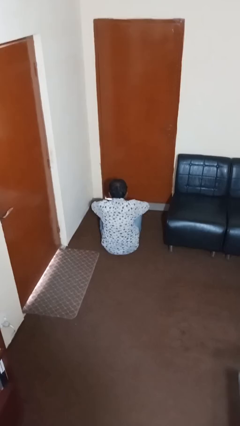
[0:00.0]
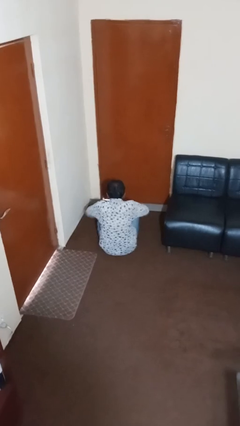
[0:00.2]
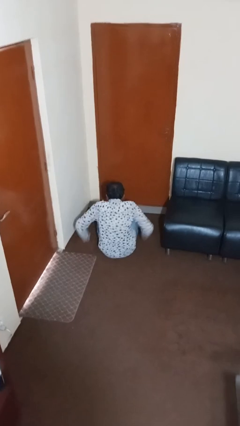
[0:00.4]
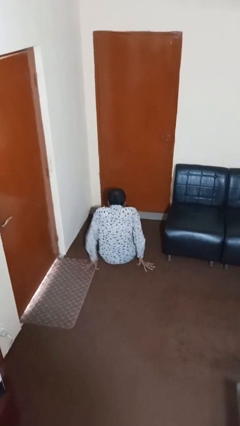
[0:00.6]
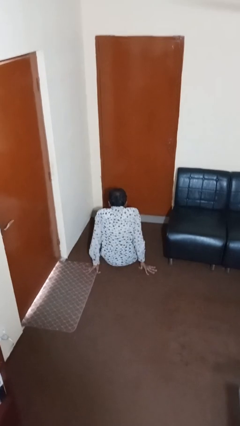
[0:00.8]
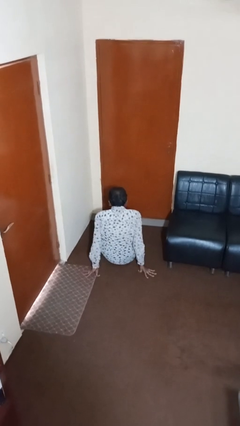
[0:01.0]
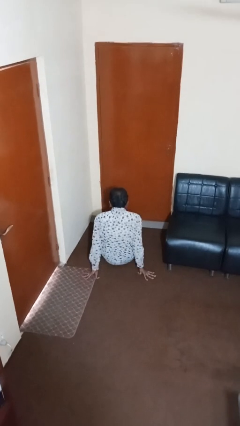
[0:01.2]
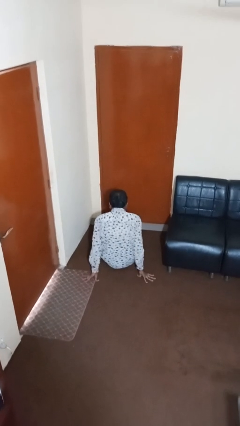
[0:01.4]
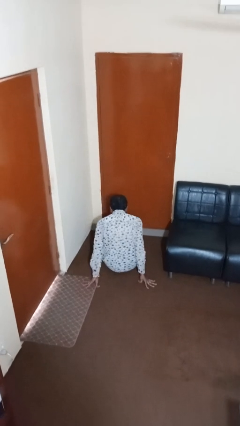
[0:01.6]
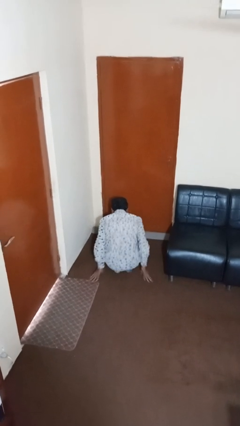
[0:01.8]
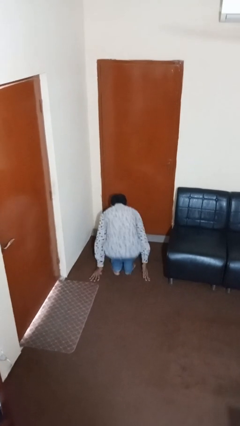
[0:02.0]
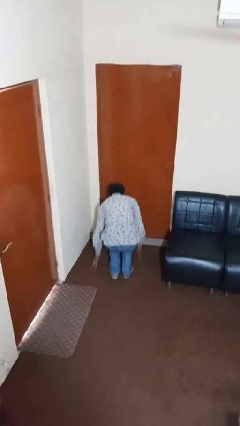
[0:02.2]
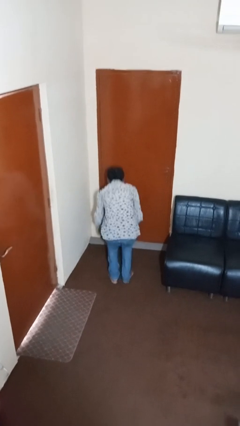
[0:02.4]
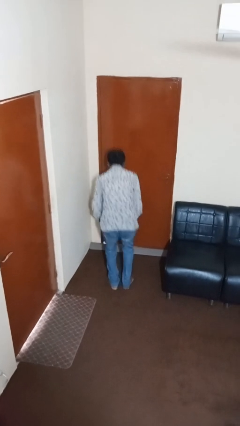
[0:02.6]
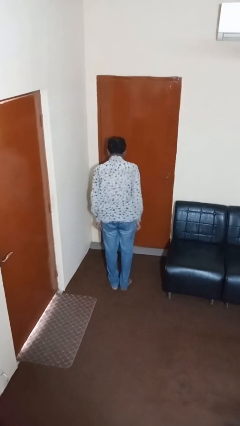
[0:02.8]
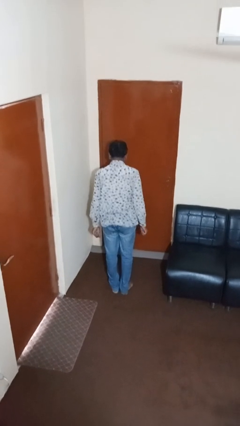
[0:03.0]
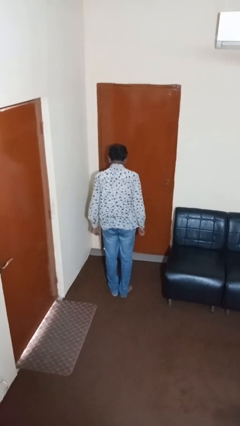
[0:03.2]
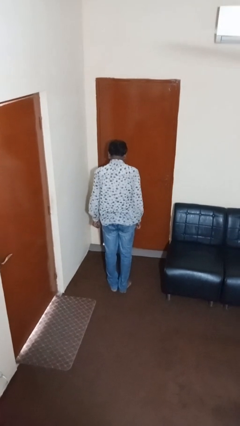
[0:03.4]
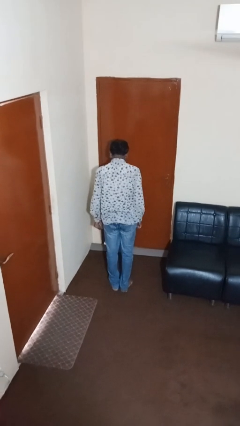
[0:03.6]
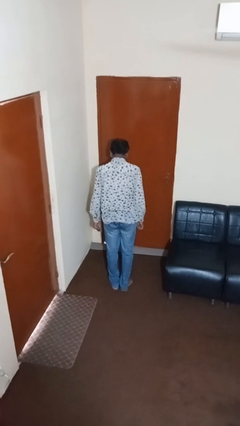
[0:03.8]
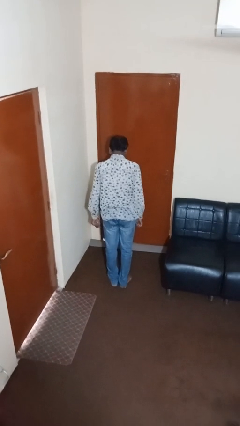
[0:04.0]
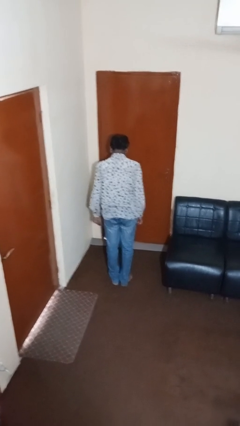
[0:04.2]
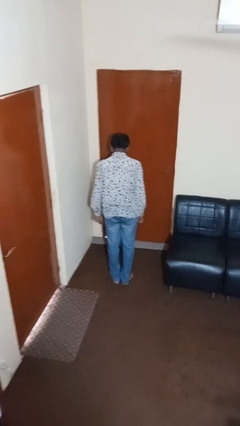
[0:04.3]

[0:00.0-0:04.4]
person stands up from floor

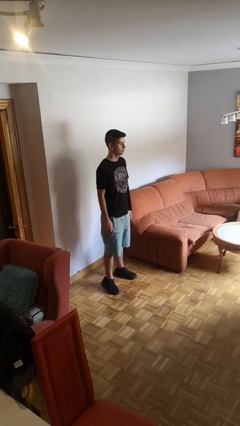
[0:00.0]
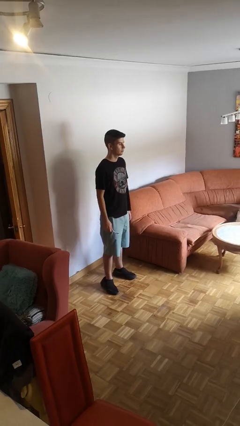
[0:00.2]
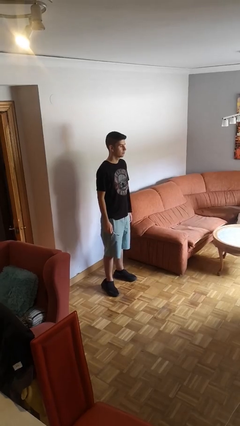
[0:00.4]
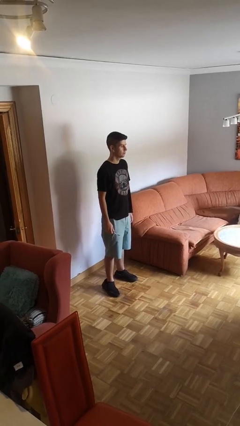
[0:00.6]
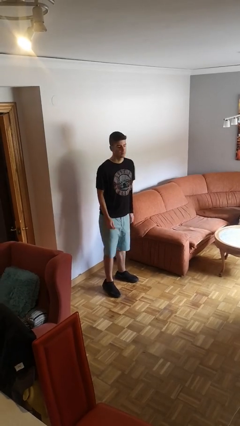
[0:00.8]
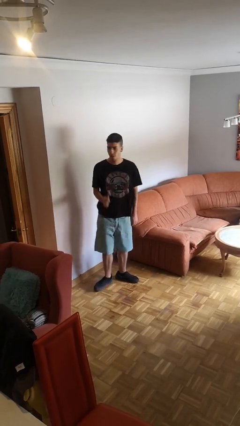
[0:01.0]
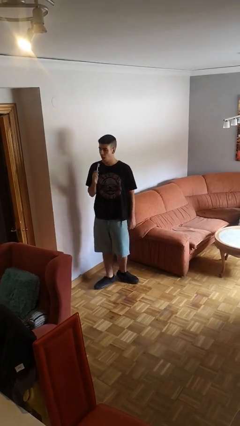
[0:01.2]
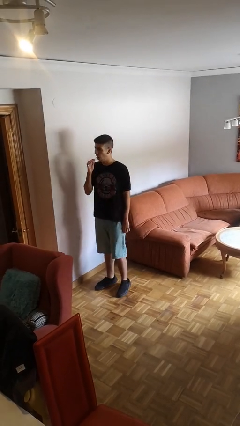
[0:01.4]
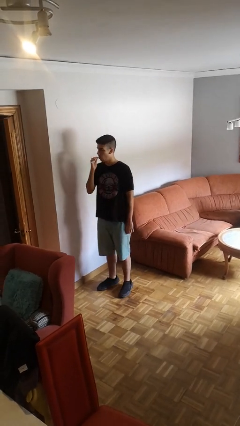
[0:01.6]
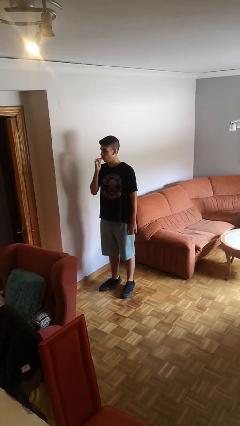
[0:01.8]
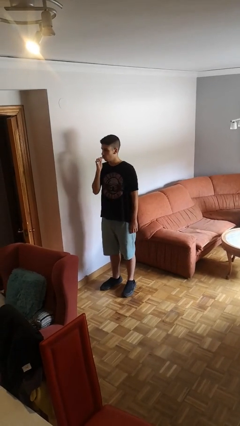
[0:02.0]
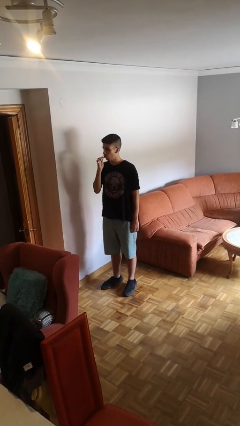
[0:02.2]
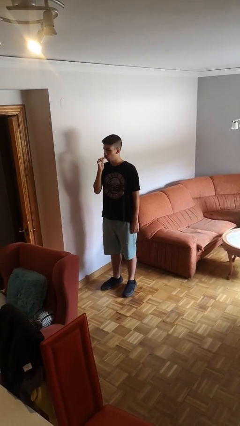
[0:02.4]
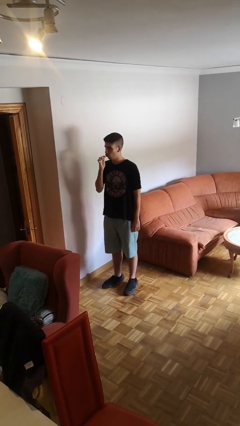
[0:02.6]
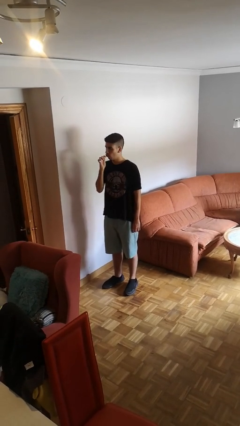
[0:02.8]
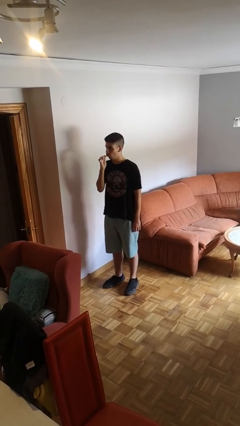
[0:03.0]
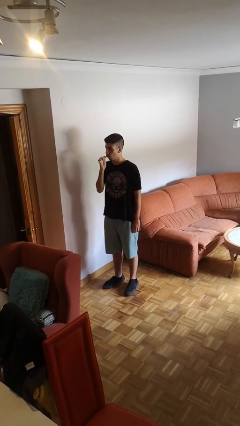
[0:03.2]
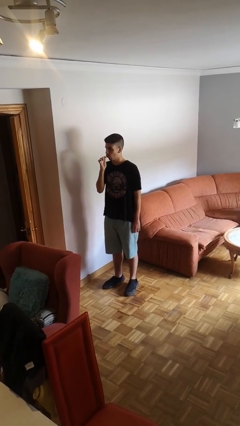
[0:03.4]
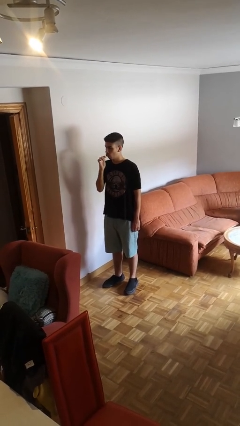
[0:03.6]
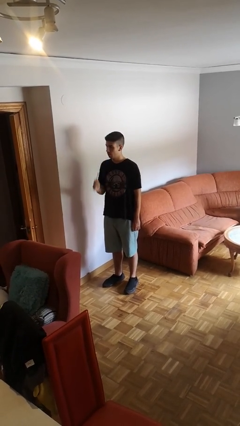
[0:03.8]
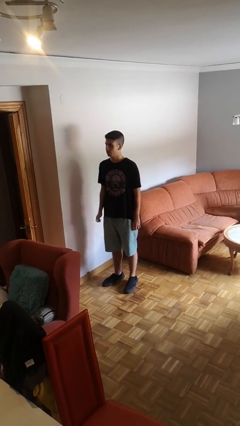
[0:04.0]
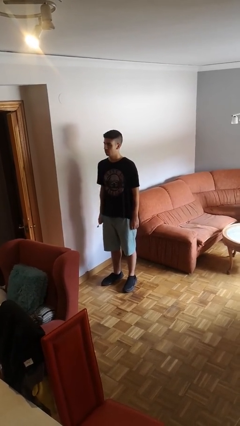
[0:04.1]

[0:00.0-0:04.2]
person brushes teeth

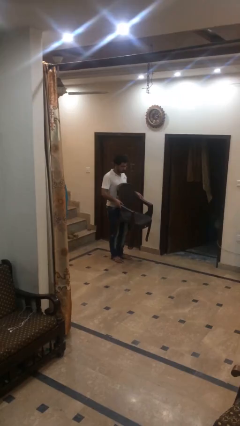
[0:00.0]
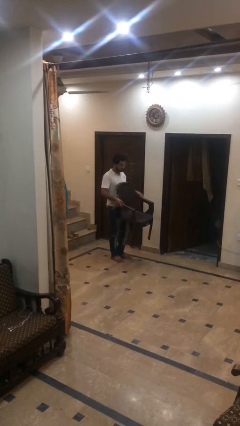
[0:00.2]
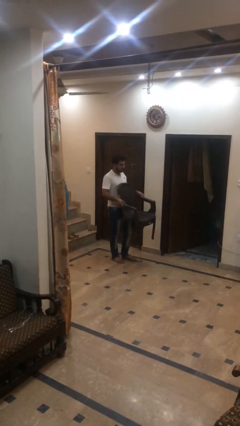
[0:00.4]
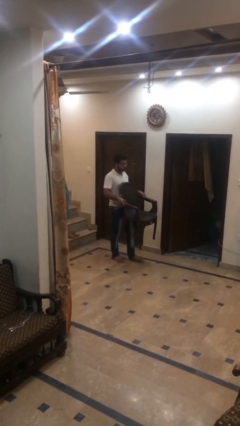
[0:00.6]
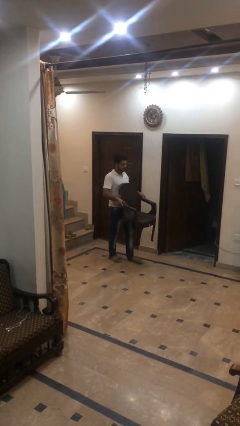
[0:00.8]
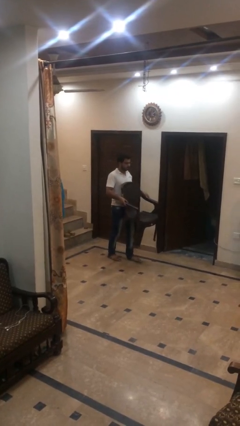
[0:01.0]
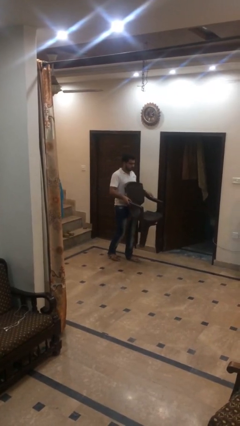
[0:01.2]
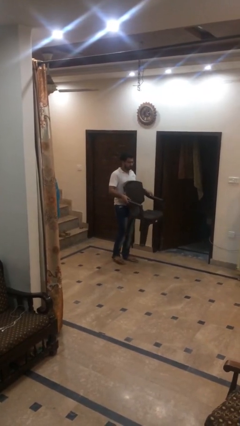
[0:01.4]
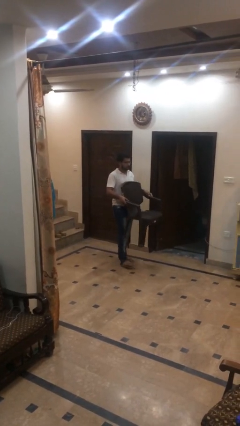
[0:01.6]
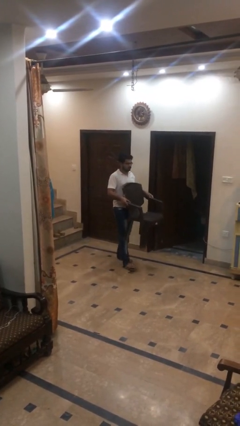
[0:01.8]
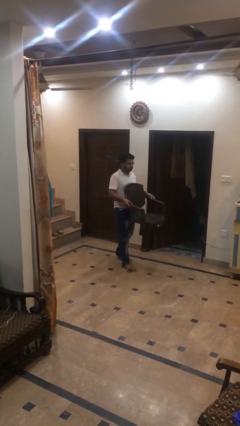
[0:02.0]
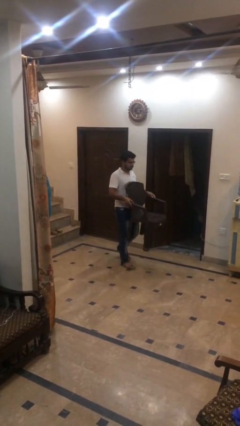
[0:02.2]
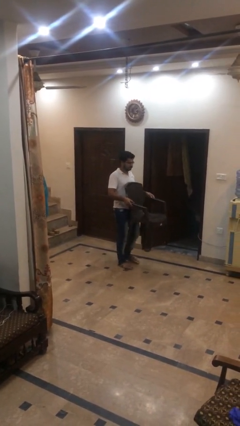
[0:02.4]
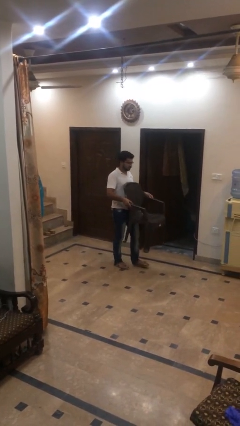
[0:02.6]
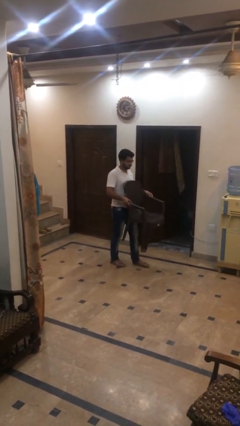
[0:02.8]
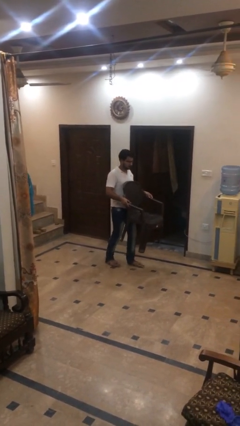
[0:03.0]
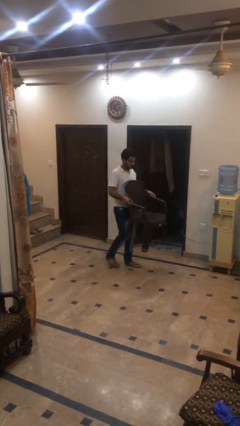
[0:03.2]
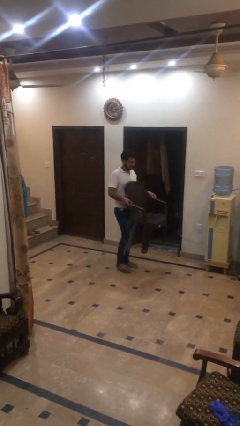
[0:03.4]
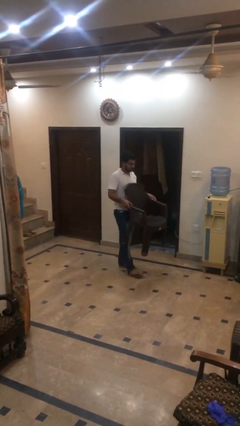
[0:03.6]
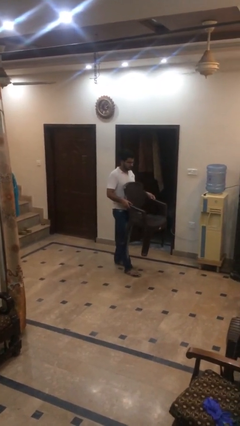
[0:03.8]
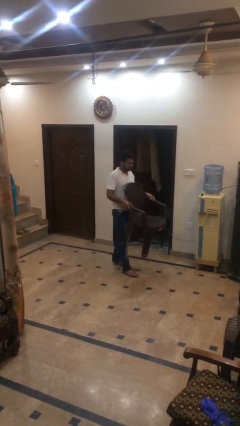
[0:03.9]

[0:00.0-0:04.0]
person carries heavy object

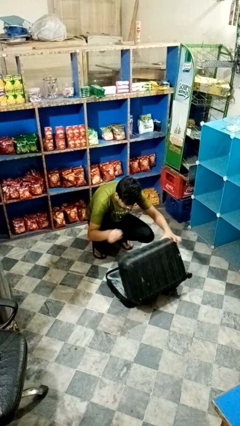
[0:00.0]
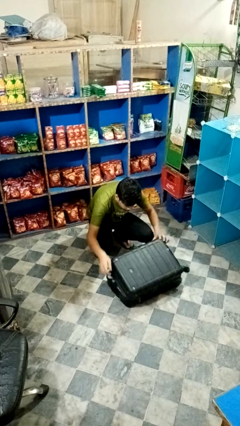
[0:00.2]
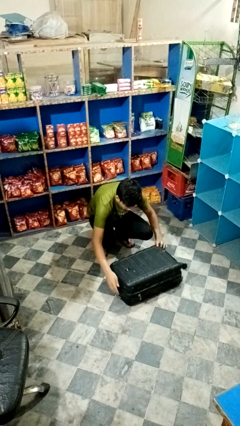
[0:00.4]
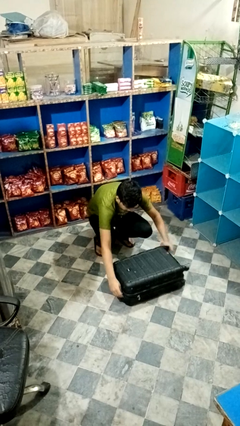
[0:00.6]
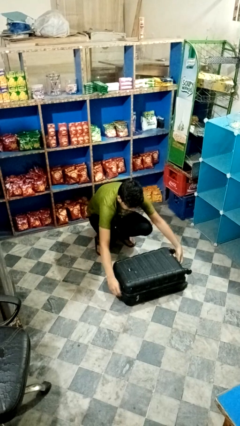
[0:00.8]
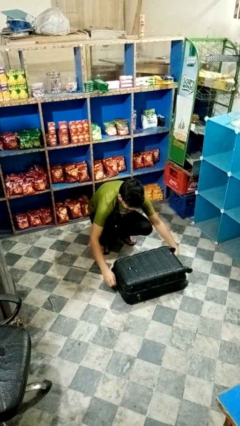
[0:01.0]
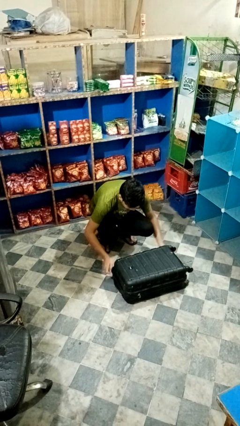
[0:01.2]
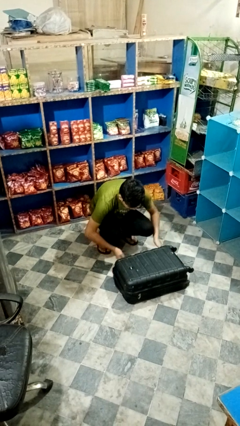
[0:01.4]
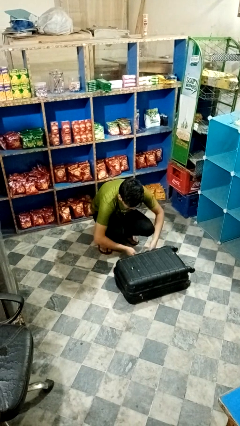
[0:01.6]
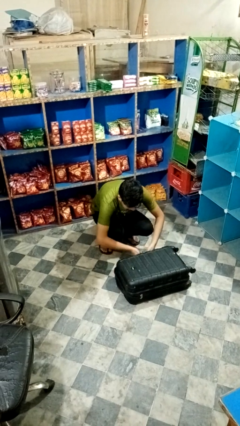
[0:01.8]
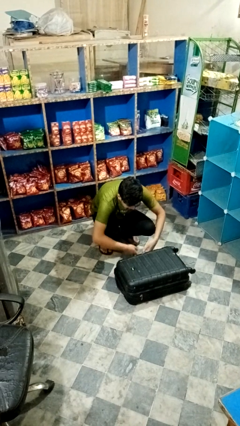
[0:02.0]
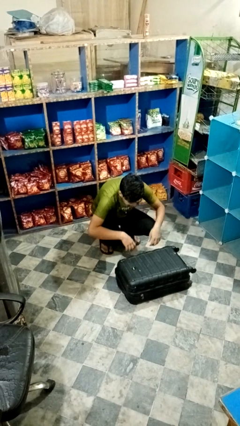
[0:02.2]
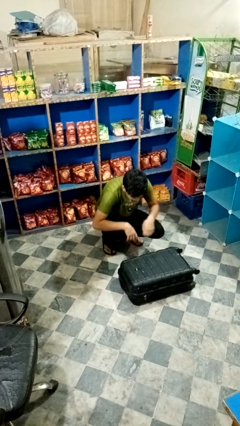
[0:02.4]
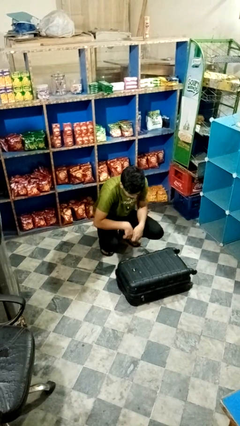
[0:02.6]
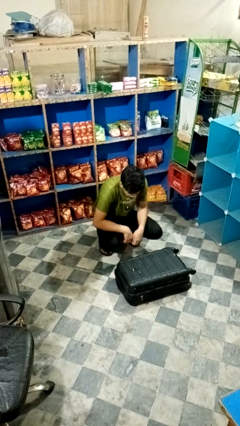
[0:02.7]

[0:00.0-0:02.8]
person closes suitcase

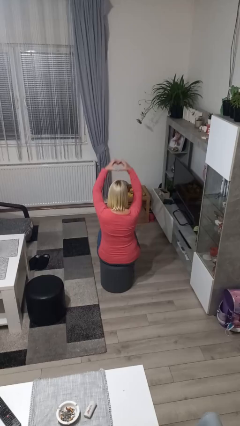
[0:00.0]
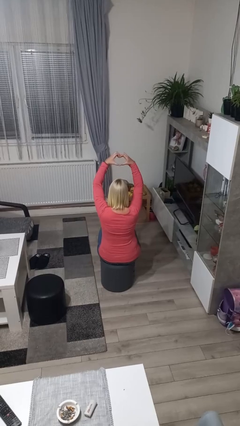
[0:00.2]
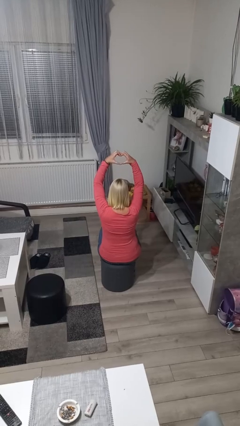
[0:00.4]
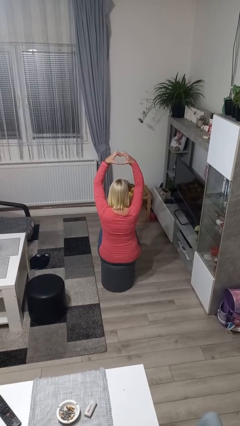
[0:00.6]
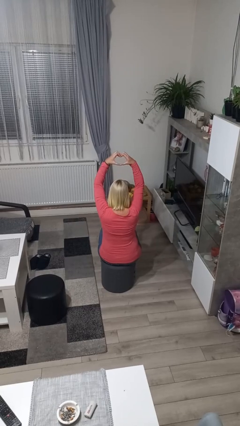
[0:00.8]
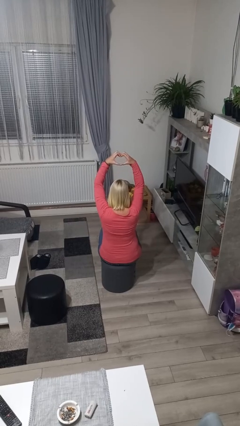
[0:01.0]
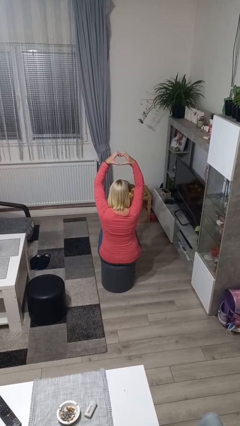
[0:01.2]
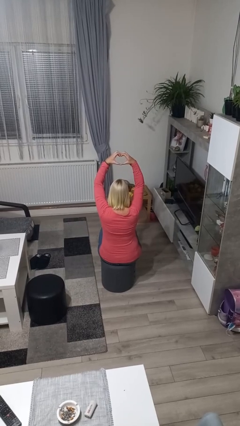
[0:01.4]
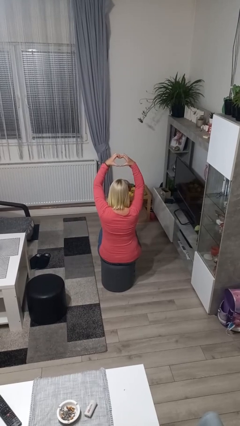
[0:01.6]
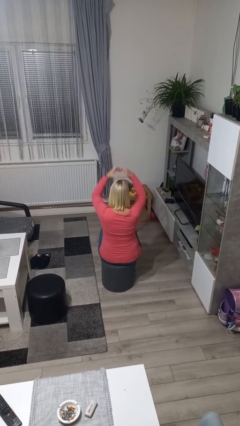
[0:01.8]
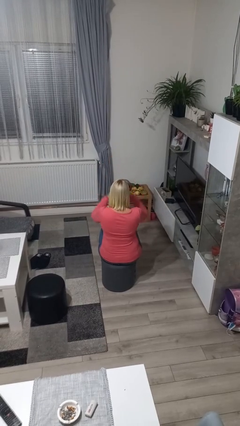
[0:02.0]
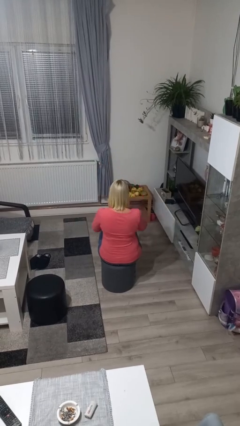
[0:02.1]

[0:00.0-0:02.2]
person gestures heart
